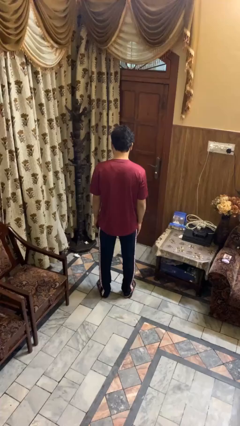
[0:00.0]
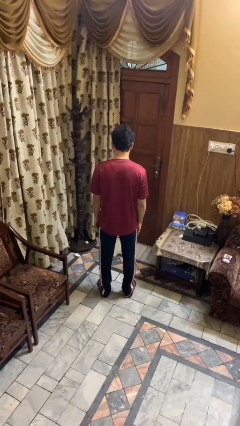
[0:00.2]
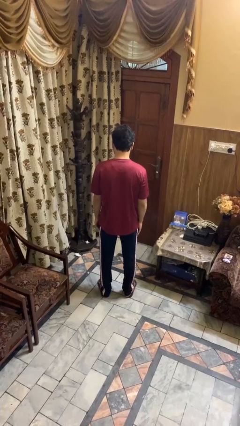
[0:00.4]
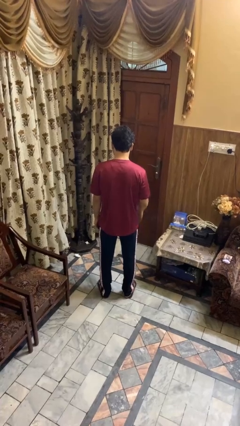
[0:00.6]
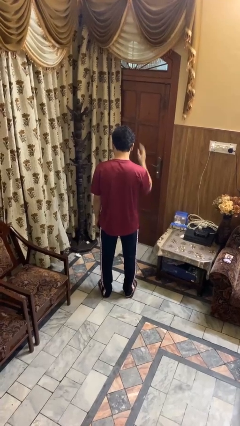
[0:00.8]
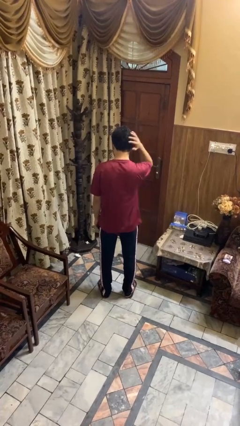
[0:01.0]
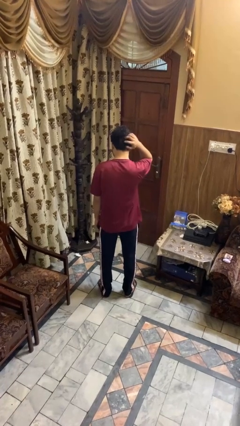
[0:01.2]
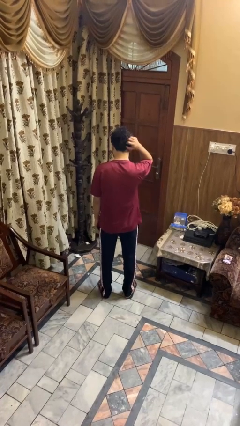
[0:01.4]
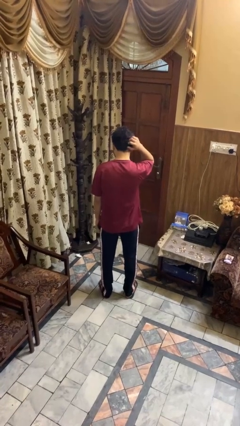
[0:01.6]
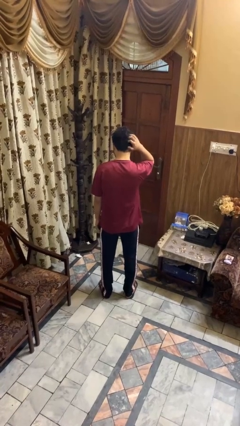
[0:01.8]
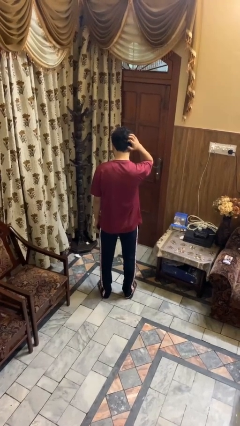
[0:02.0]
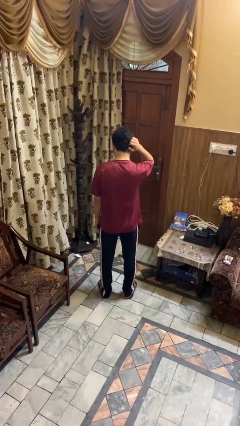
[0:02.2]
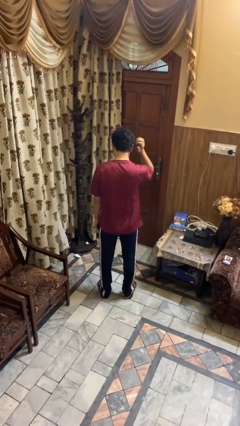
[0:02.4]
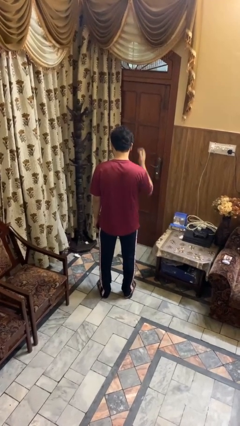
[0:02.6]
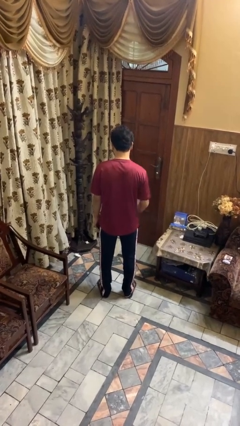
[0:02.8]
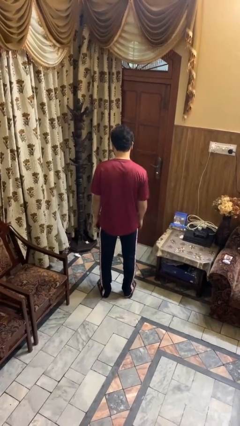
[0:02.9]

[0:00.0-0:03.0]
person scratches face

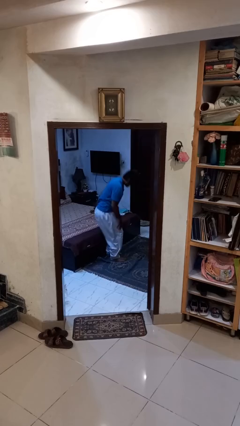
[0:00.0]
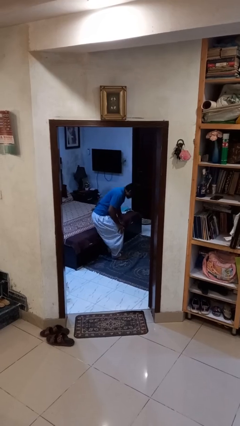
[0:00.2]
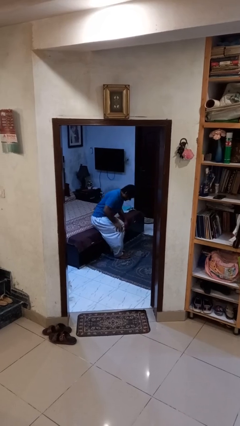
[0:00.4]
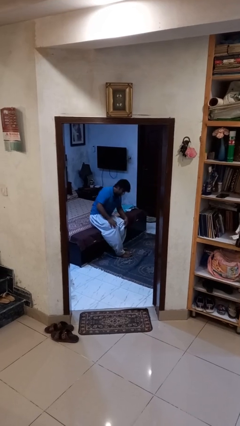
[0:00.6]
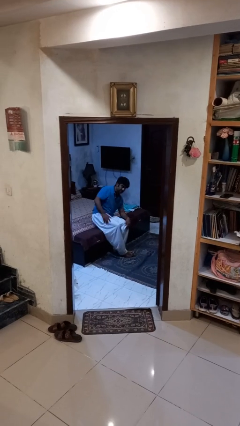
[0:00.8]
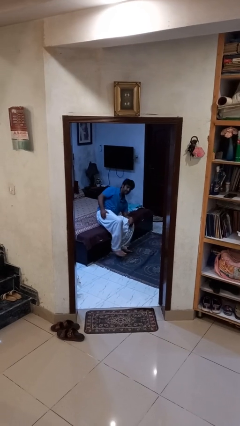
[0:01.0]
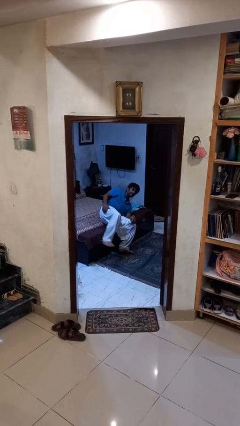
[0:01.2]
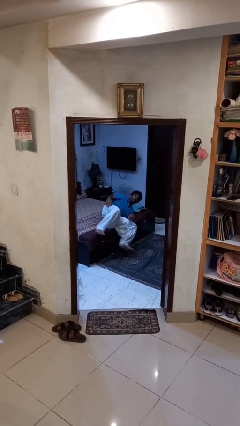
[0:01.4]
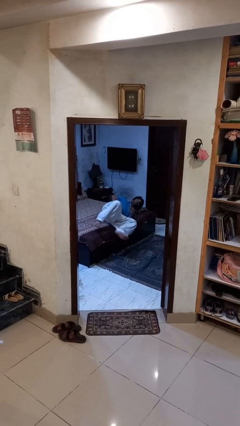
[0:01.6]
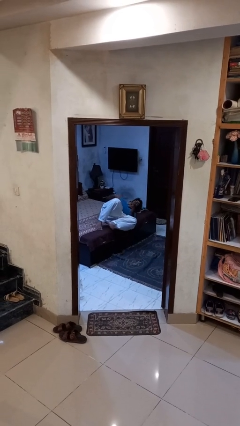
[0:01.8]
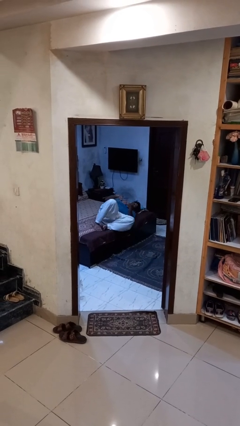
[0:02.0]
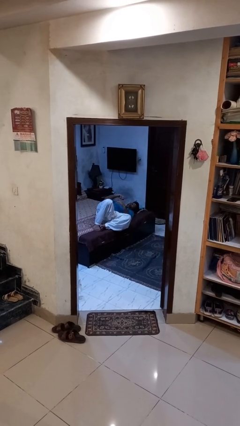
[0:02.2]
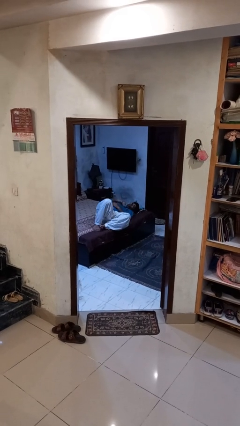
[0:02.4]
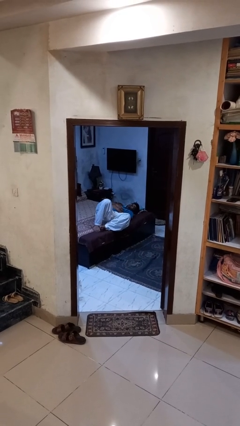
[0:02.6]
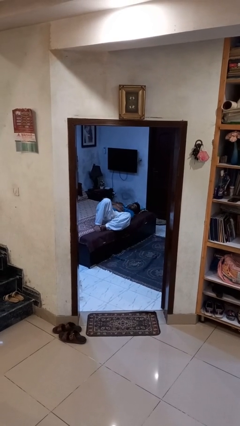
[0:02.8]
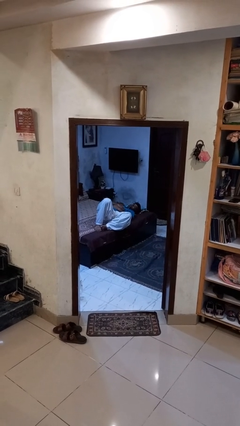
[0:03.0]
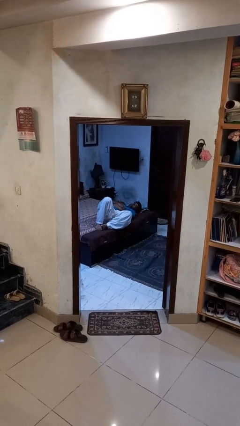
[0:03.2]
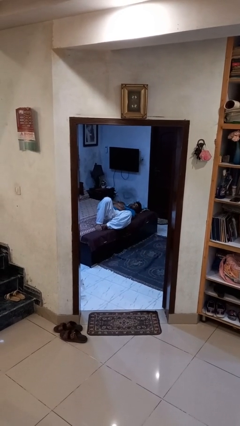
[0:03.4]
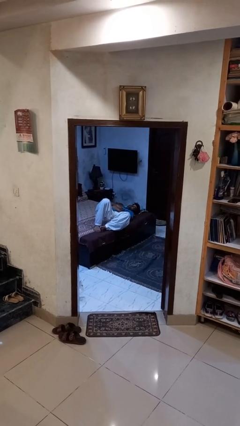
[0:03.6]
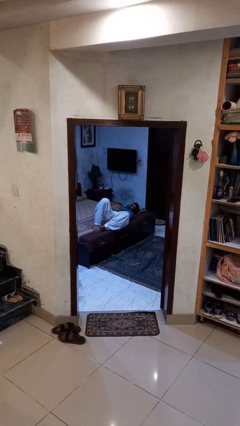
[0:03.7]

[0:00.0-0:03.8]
person lies down on bed

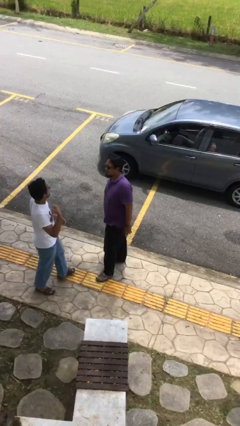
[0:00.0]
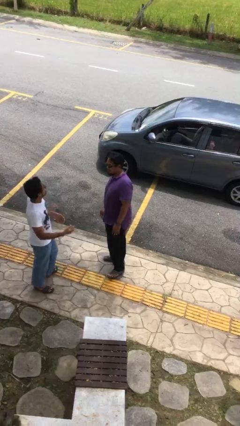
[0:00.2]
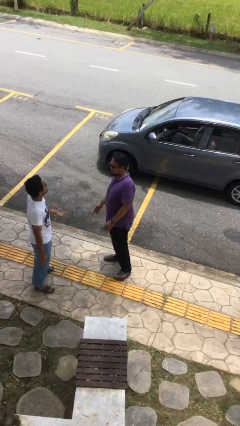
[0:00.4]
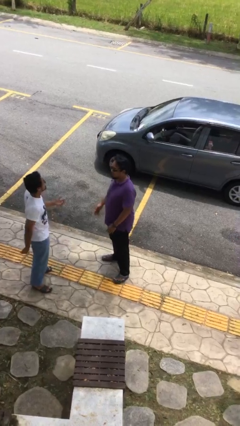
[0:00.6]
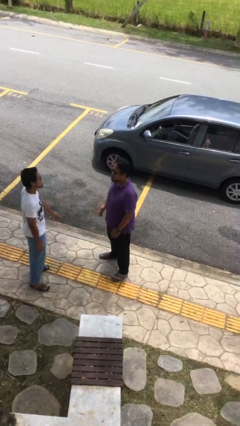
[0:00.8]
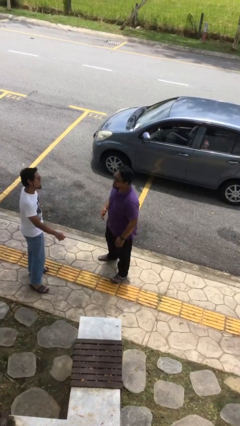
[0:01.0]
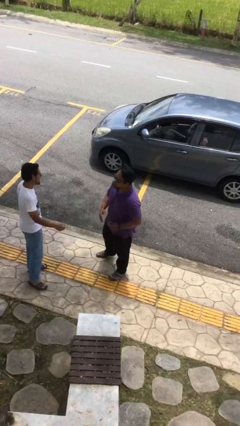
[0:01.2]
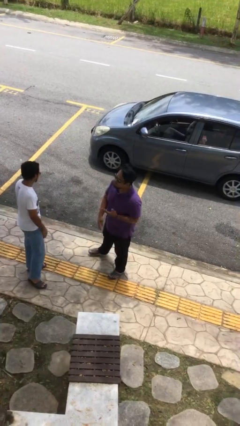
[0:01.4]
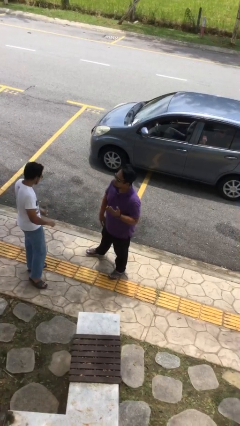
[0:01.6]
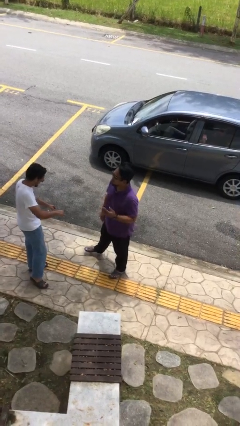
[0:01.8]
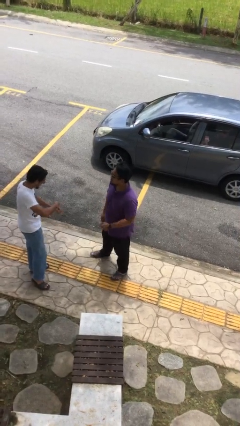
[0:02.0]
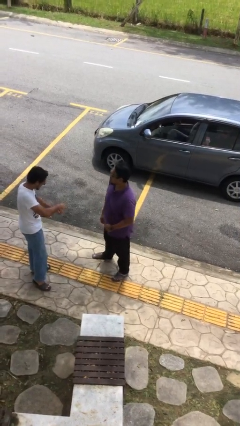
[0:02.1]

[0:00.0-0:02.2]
person talks to person

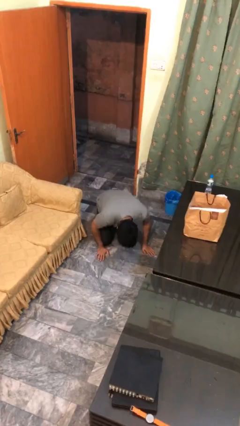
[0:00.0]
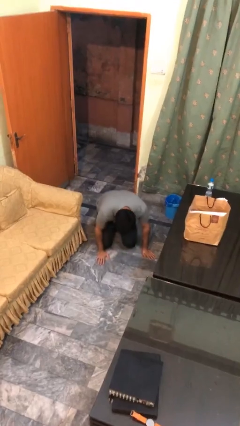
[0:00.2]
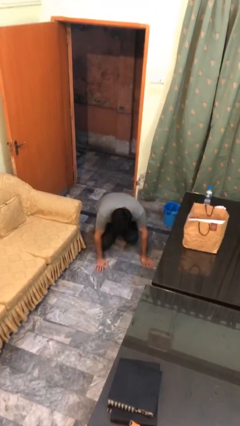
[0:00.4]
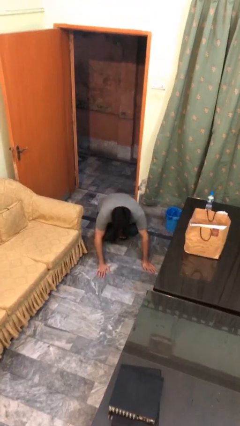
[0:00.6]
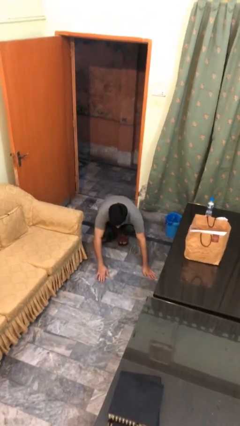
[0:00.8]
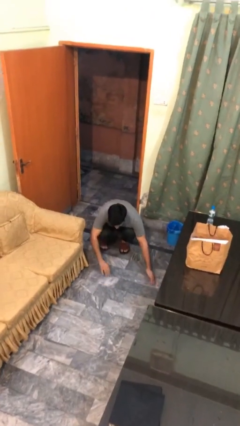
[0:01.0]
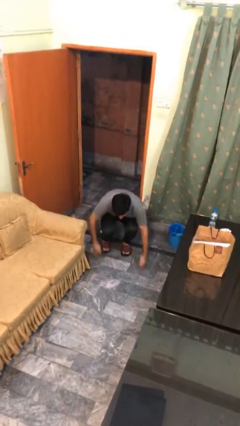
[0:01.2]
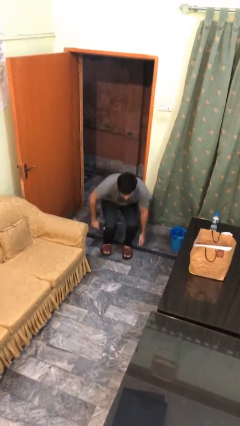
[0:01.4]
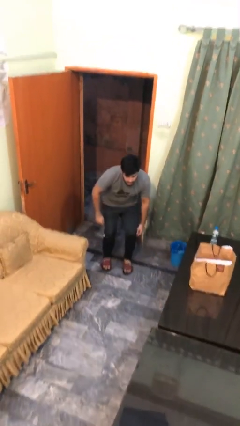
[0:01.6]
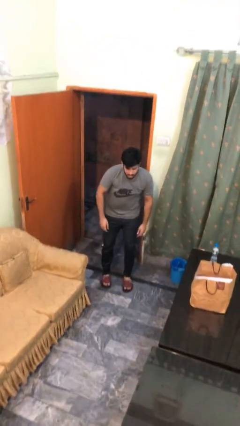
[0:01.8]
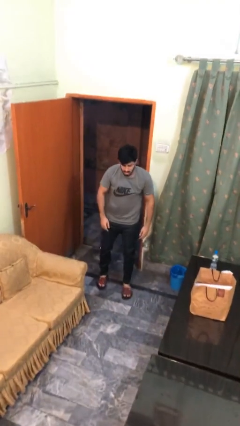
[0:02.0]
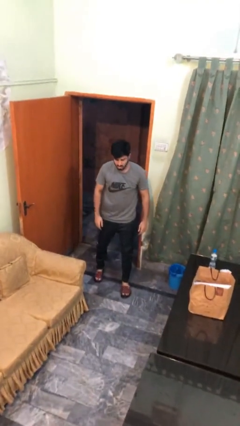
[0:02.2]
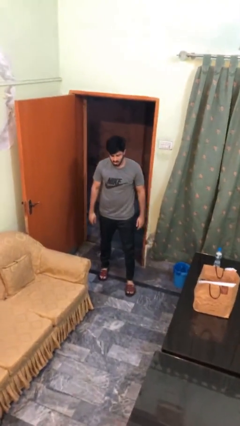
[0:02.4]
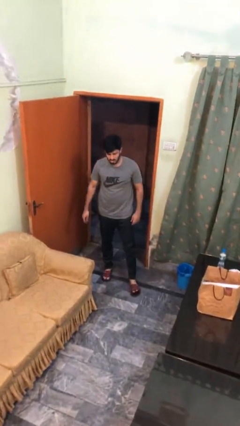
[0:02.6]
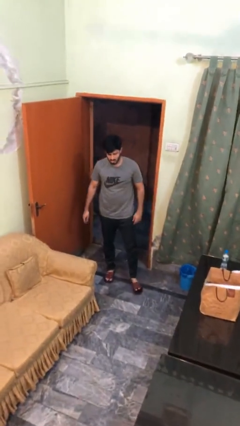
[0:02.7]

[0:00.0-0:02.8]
person stands up from floor

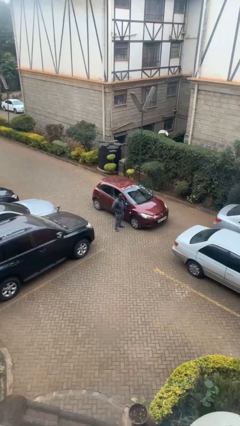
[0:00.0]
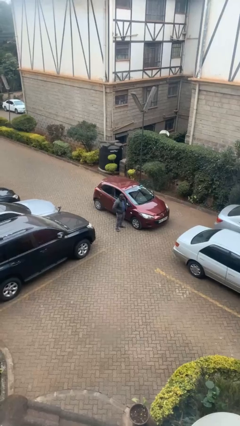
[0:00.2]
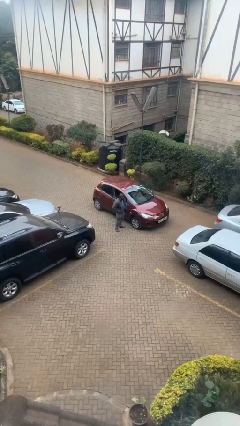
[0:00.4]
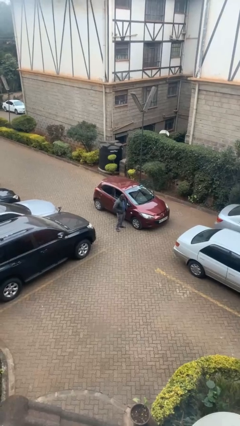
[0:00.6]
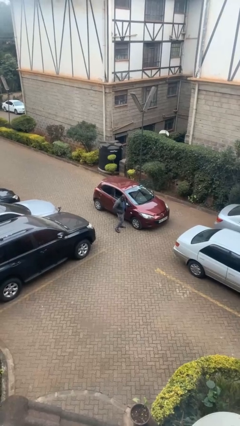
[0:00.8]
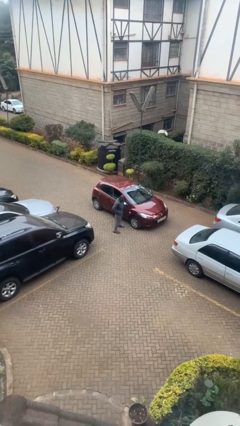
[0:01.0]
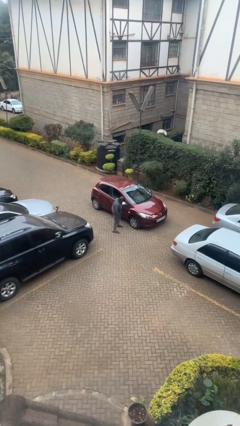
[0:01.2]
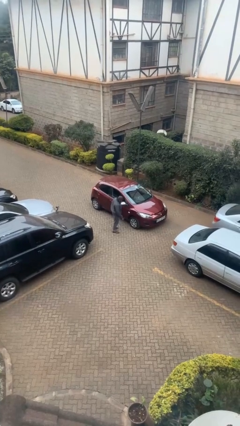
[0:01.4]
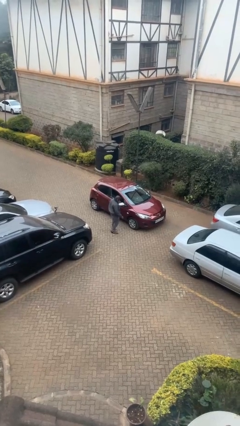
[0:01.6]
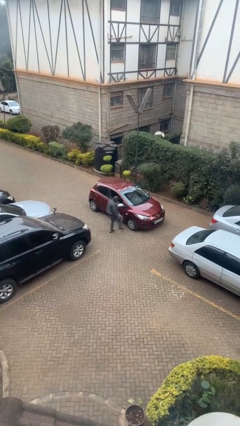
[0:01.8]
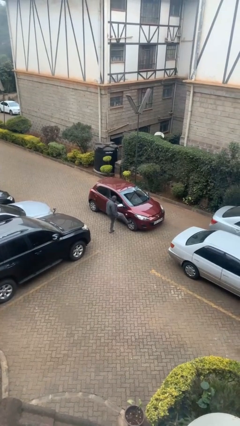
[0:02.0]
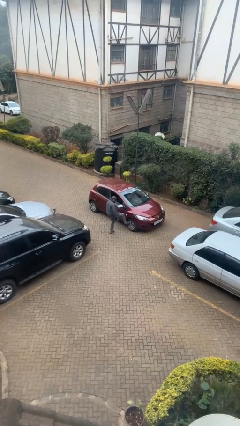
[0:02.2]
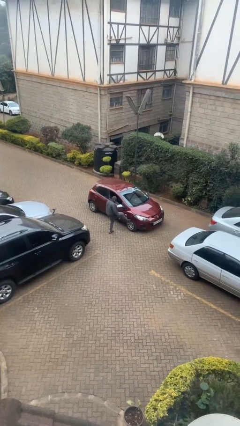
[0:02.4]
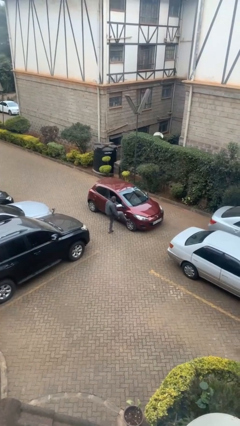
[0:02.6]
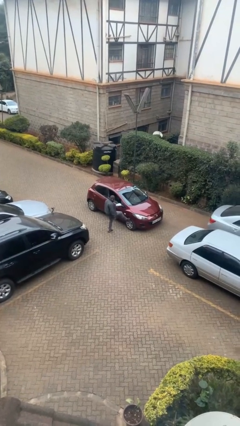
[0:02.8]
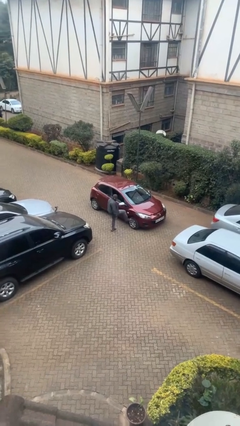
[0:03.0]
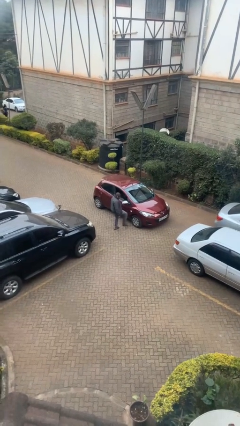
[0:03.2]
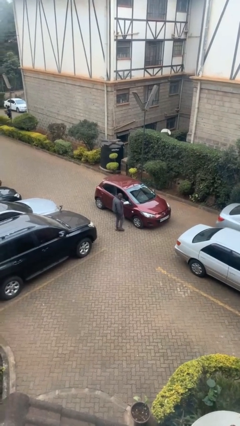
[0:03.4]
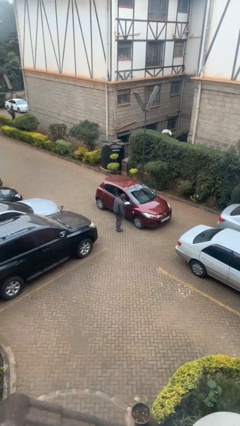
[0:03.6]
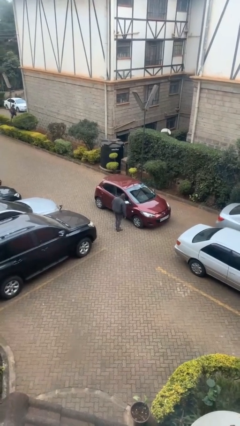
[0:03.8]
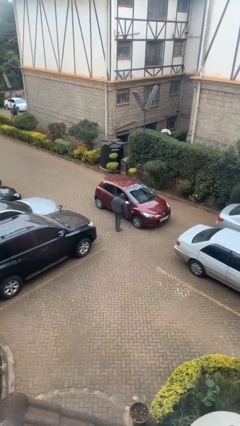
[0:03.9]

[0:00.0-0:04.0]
person kicks car tires

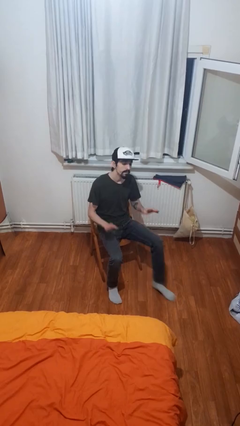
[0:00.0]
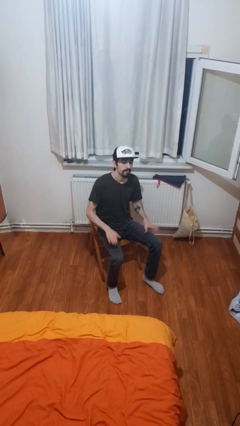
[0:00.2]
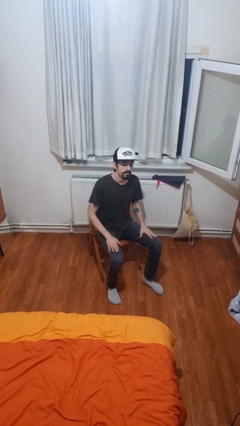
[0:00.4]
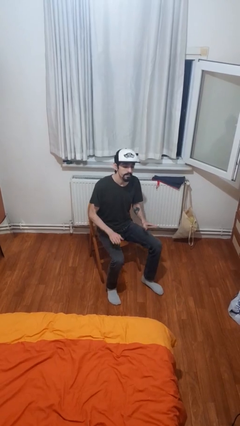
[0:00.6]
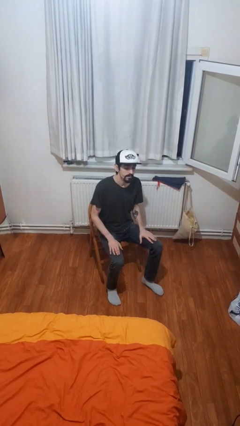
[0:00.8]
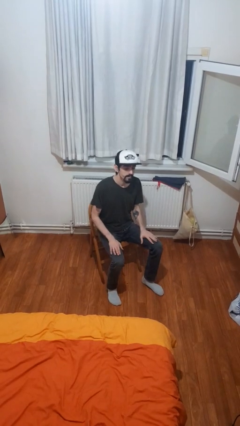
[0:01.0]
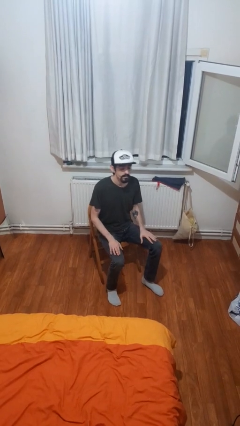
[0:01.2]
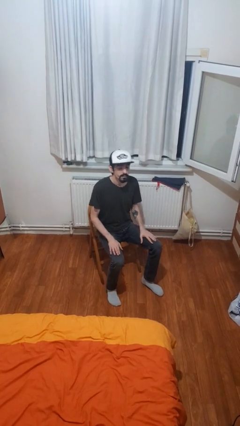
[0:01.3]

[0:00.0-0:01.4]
person slaps hands on thighs

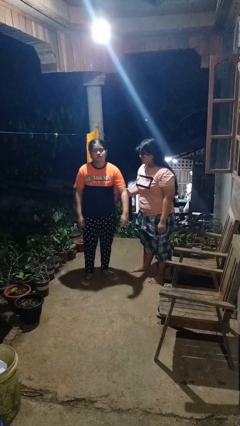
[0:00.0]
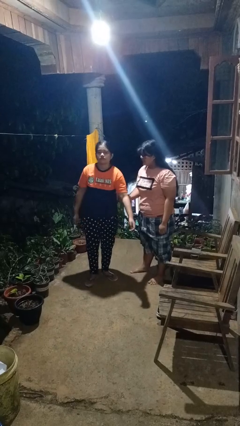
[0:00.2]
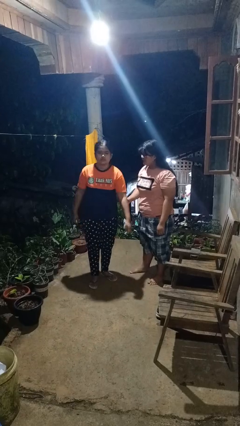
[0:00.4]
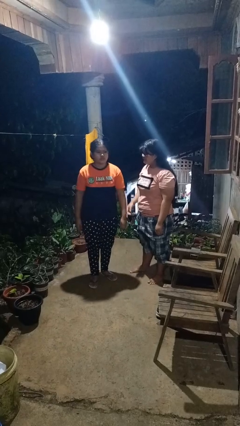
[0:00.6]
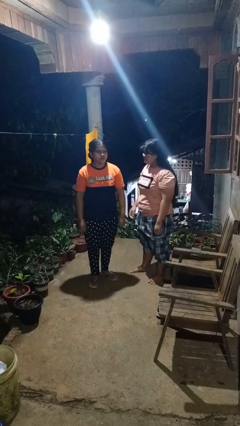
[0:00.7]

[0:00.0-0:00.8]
person grabs person by bicep
